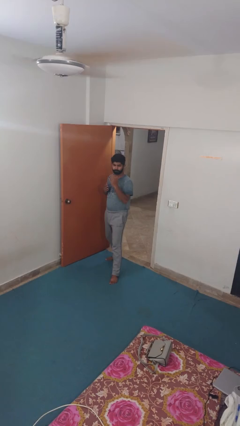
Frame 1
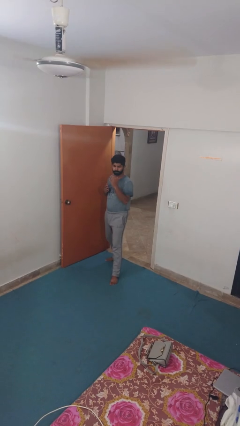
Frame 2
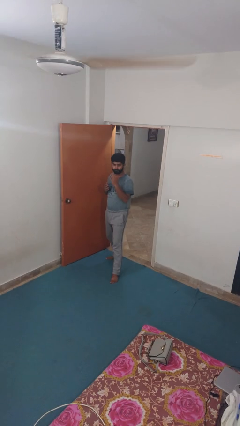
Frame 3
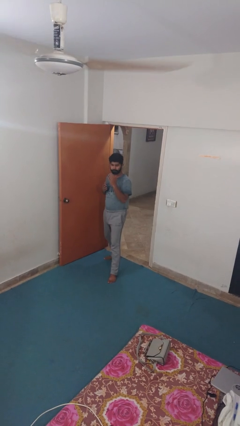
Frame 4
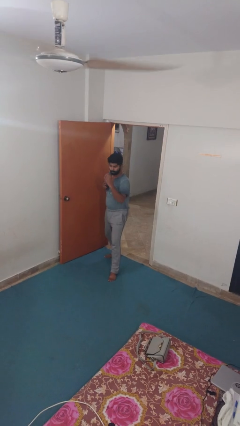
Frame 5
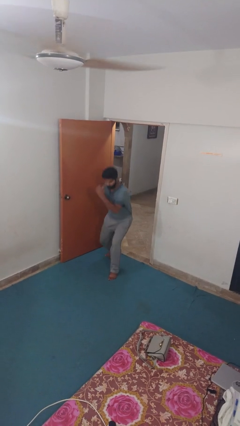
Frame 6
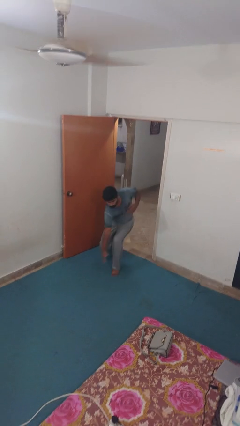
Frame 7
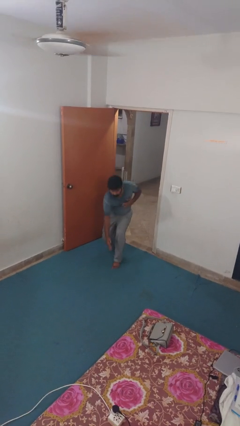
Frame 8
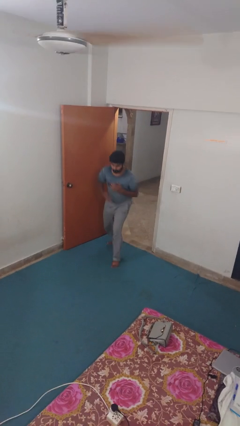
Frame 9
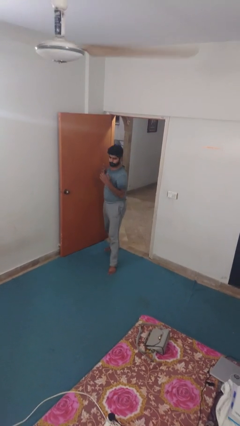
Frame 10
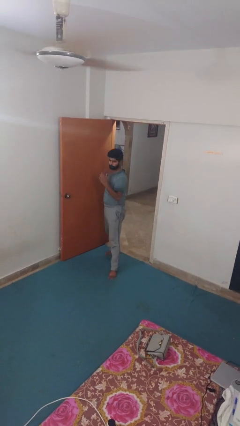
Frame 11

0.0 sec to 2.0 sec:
person karate chop

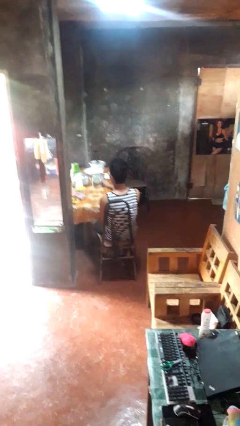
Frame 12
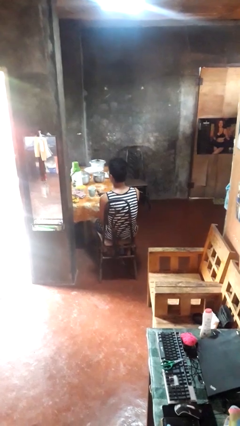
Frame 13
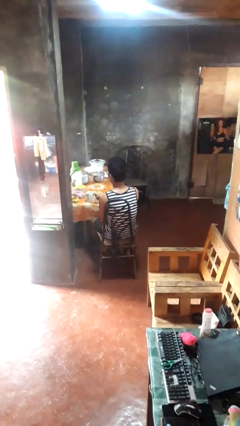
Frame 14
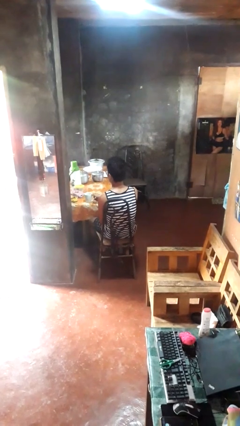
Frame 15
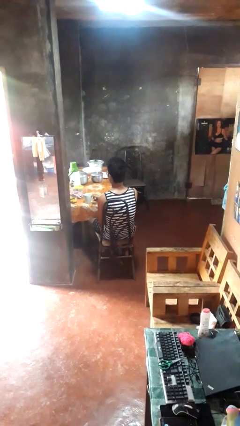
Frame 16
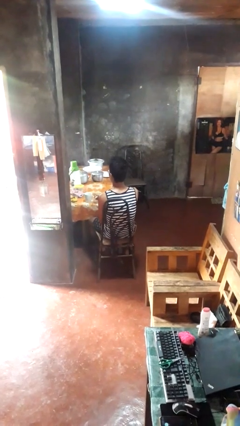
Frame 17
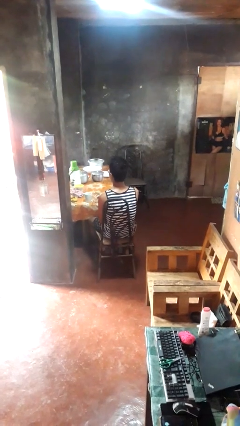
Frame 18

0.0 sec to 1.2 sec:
person puts down object on table

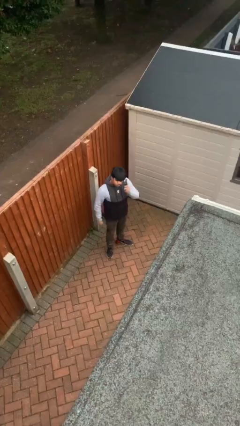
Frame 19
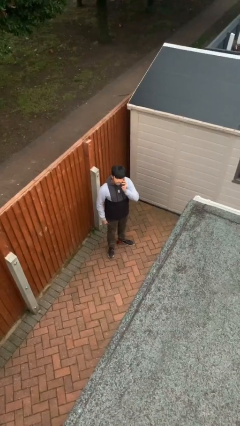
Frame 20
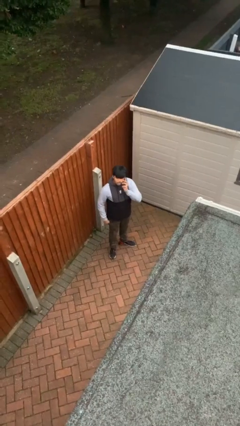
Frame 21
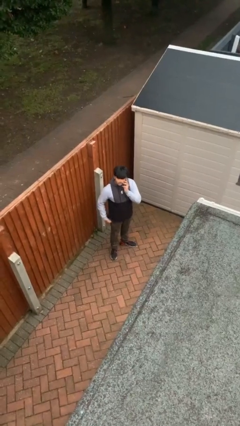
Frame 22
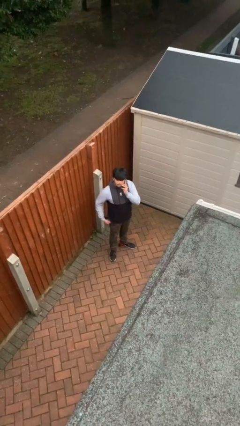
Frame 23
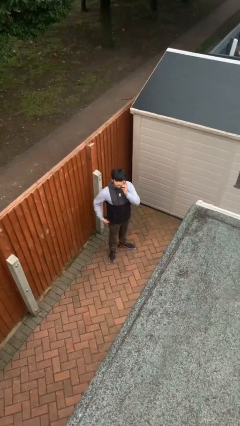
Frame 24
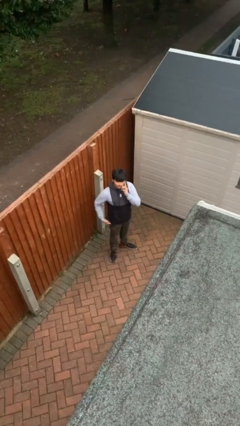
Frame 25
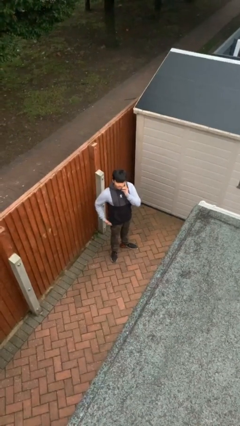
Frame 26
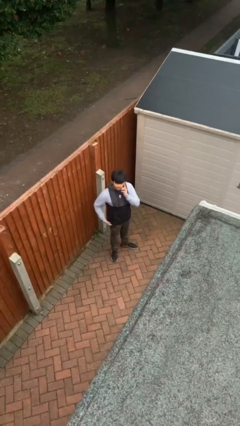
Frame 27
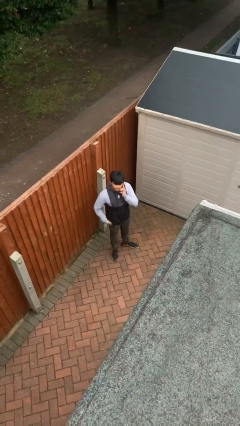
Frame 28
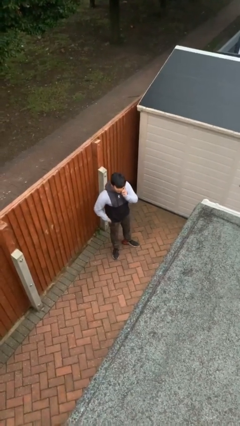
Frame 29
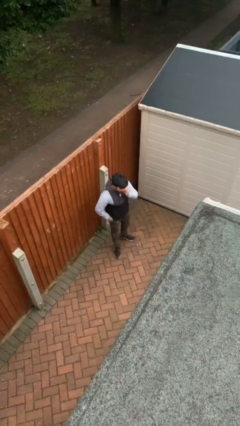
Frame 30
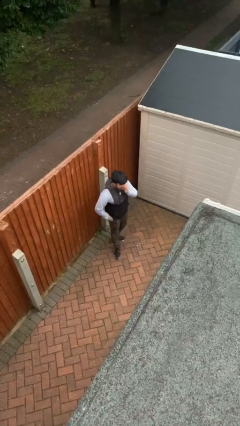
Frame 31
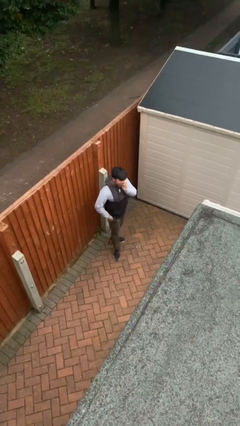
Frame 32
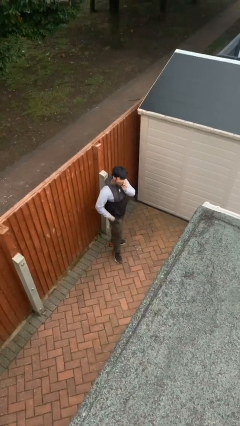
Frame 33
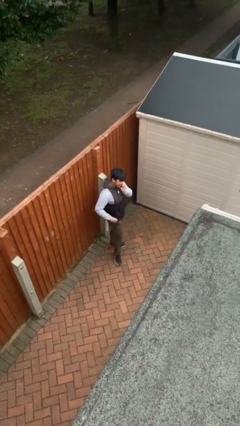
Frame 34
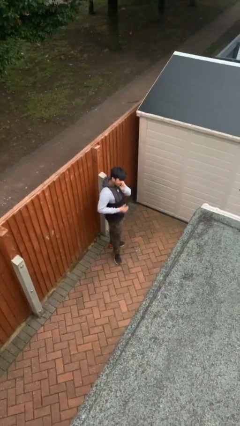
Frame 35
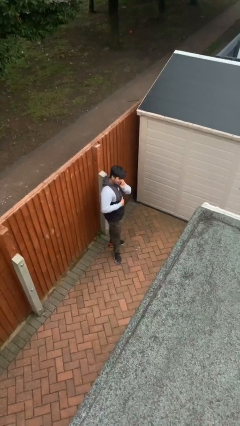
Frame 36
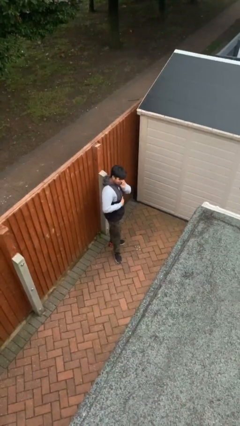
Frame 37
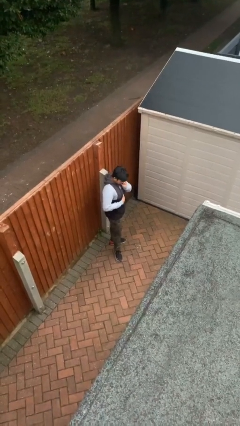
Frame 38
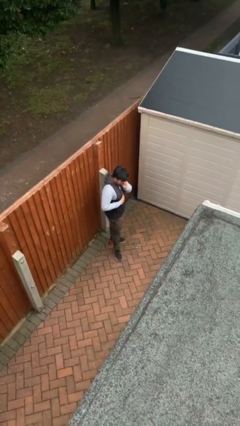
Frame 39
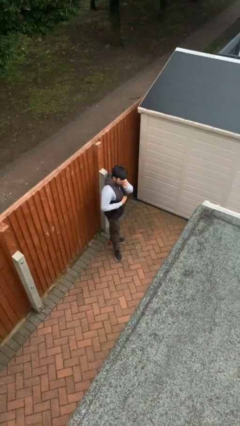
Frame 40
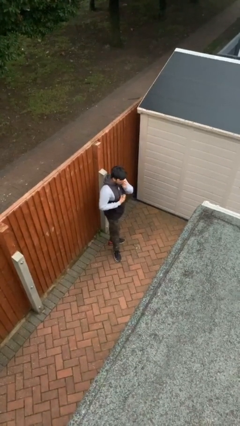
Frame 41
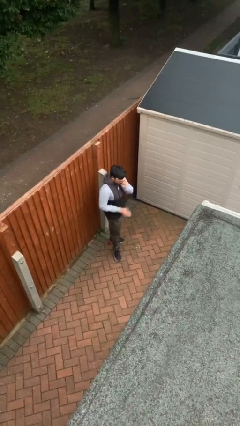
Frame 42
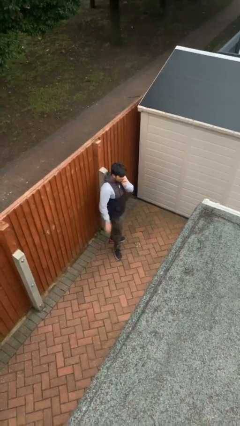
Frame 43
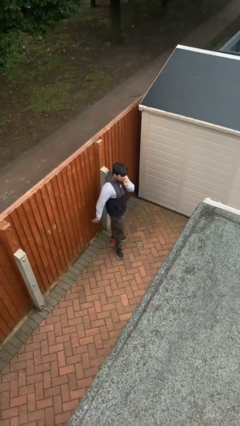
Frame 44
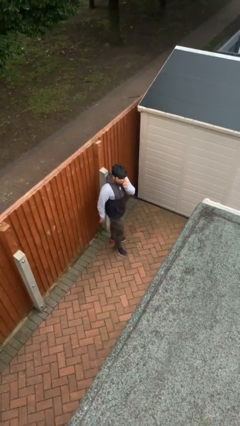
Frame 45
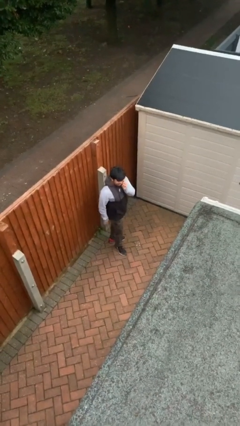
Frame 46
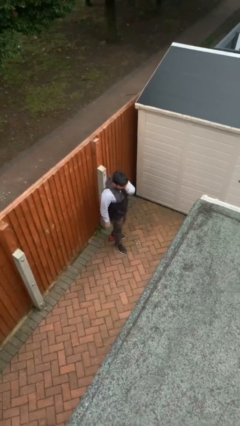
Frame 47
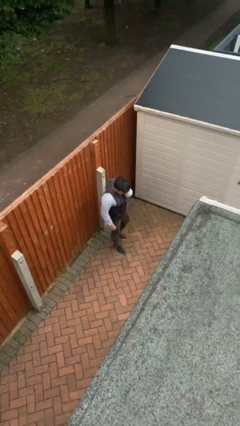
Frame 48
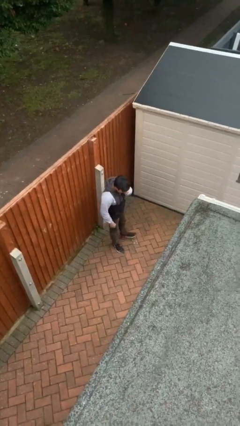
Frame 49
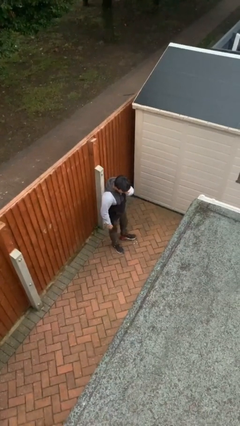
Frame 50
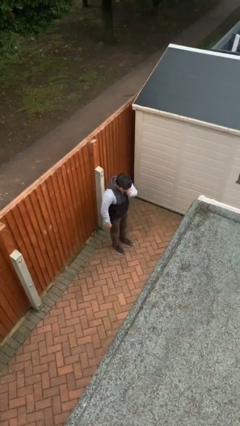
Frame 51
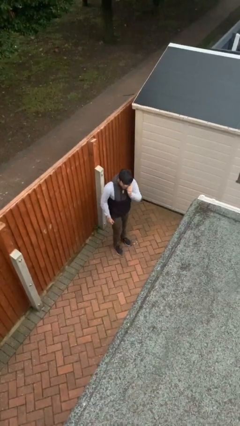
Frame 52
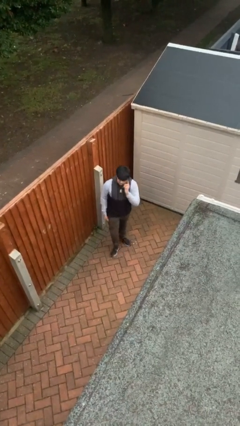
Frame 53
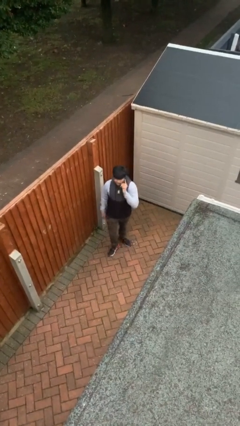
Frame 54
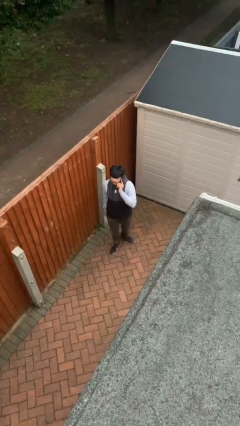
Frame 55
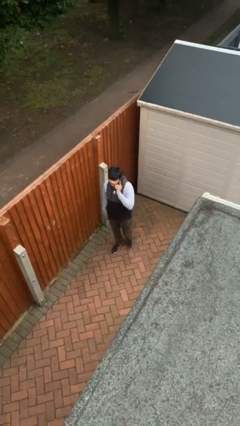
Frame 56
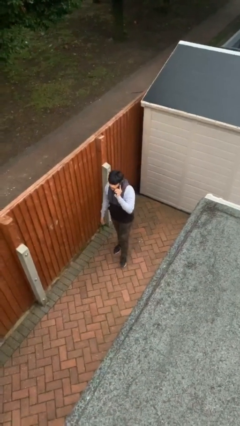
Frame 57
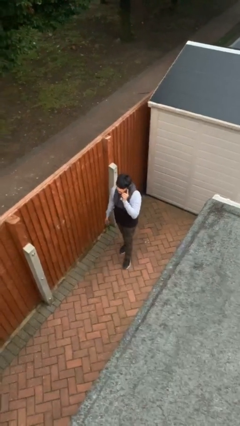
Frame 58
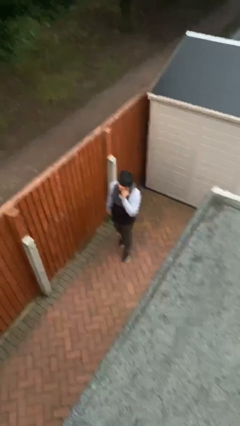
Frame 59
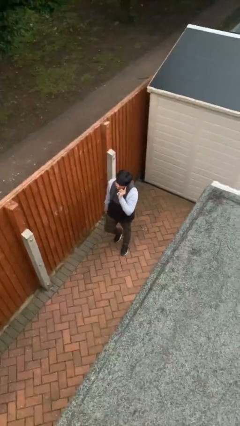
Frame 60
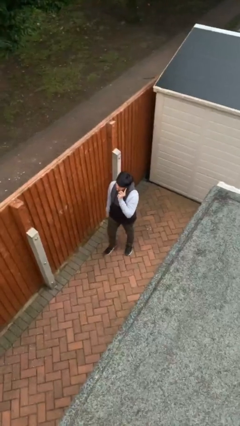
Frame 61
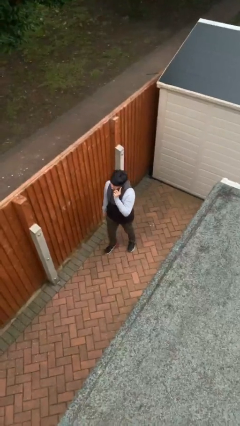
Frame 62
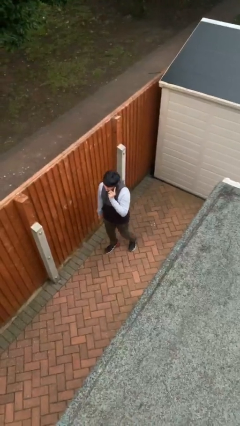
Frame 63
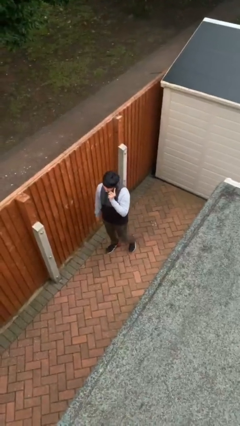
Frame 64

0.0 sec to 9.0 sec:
person talks on phone

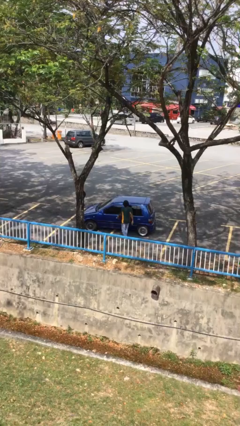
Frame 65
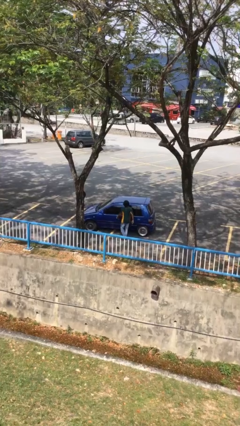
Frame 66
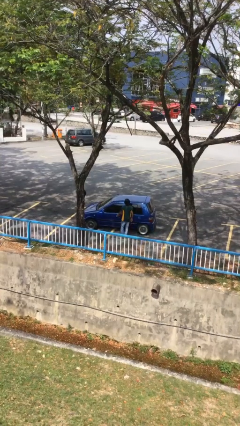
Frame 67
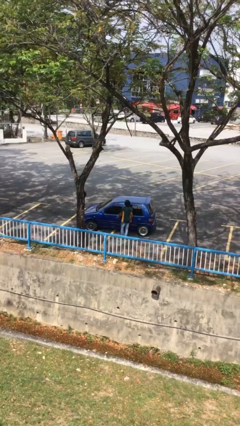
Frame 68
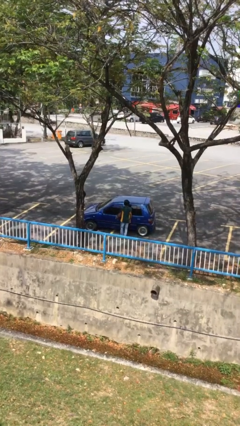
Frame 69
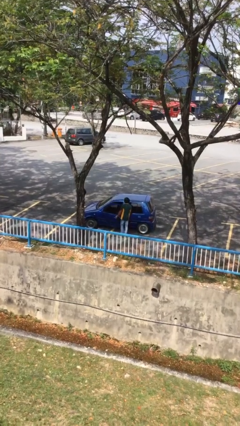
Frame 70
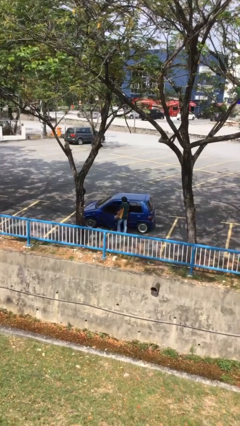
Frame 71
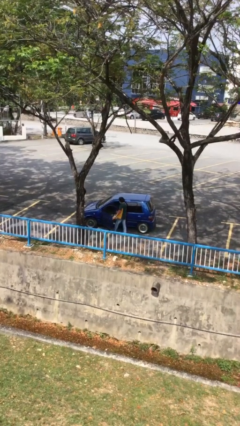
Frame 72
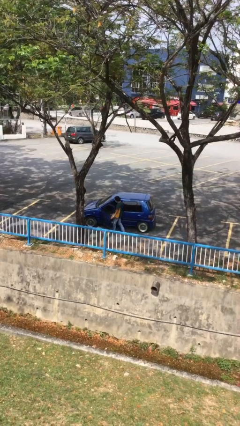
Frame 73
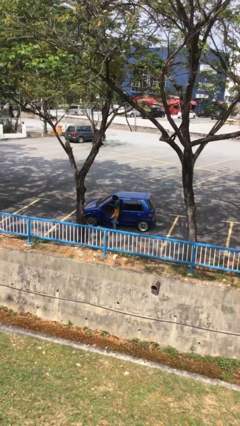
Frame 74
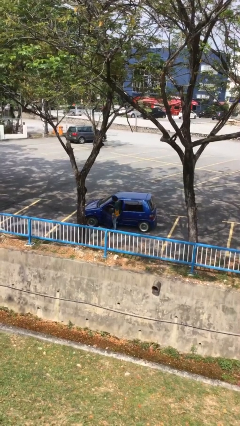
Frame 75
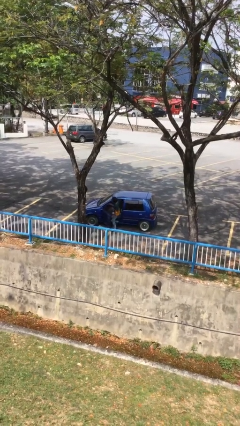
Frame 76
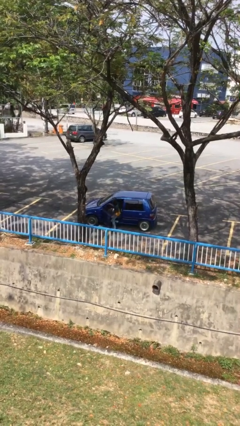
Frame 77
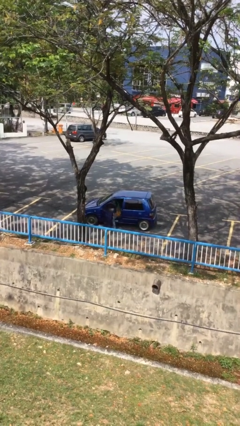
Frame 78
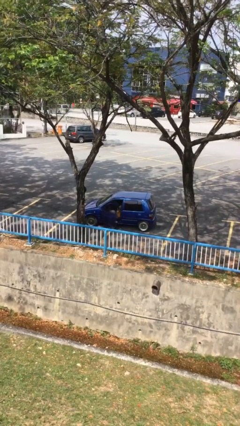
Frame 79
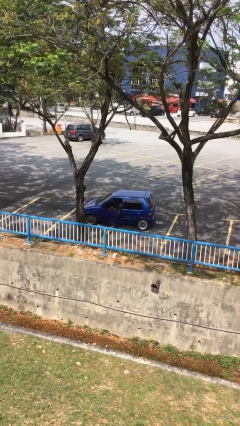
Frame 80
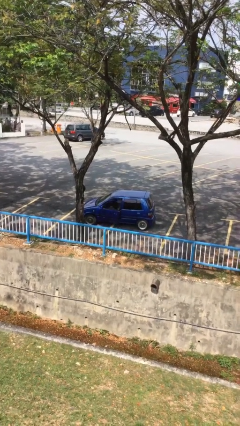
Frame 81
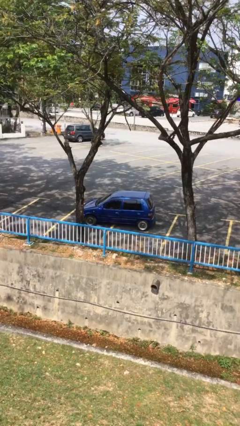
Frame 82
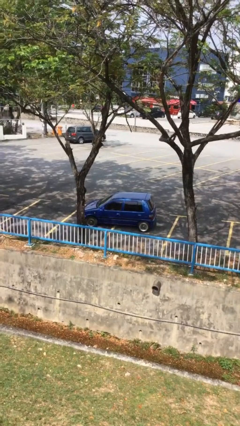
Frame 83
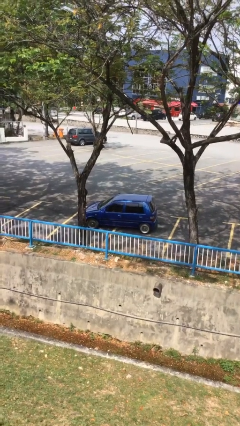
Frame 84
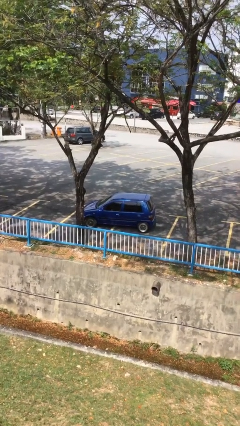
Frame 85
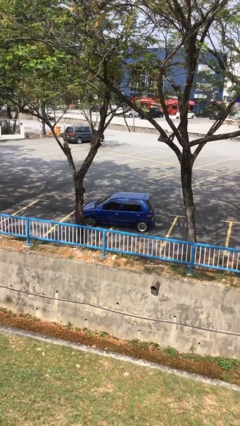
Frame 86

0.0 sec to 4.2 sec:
car picks up person

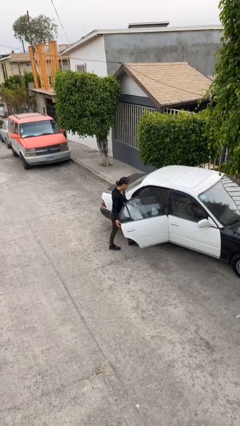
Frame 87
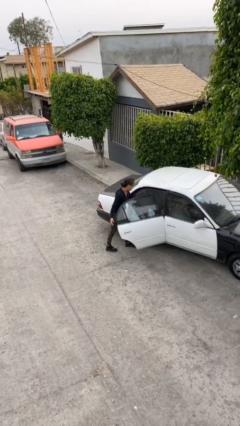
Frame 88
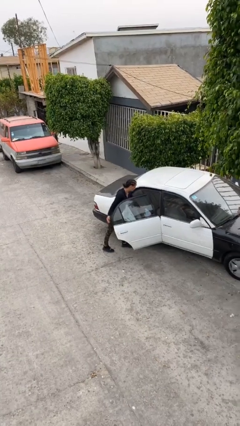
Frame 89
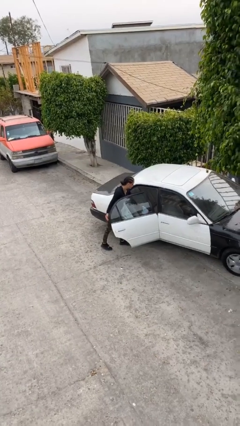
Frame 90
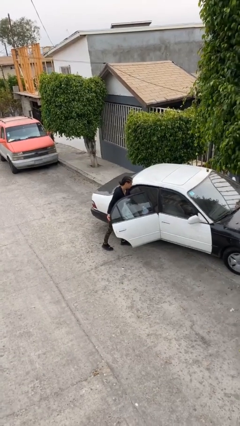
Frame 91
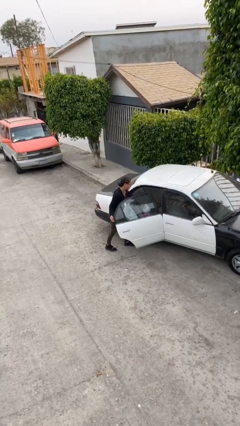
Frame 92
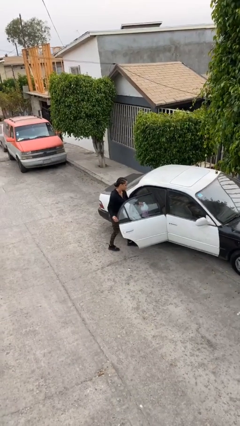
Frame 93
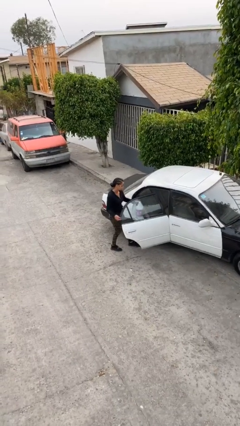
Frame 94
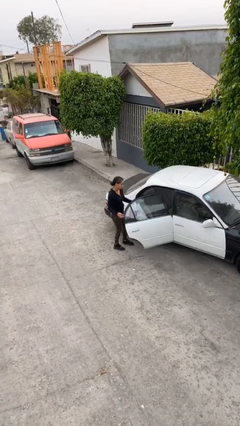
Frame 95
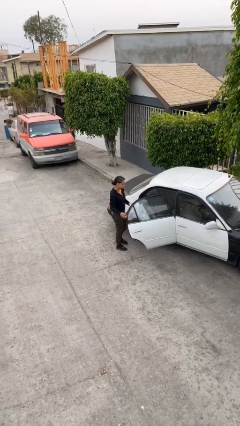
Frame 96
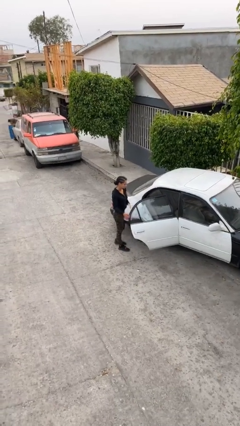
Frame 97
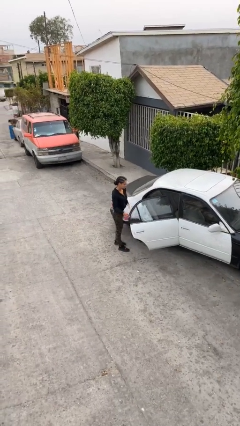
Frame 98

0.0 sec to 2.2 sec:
person unloads car
